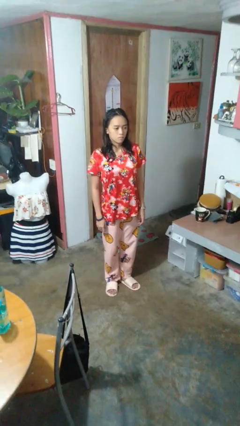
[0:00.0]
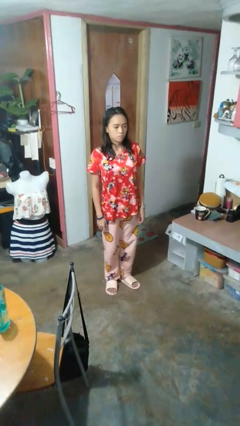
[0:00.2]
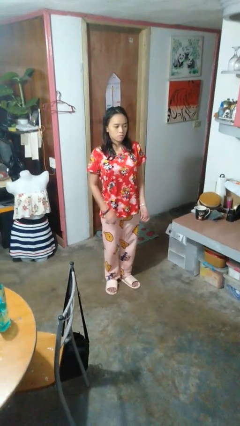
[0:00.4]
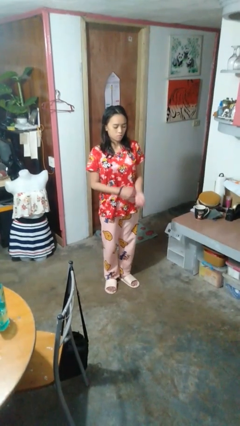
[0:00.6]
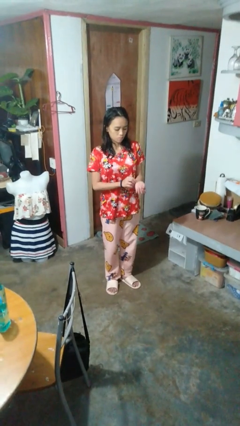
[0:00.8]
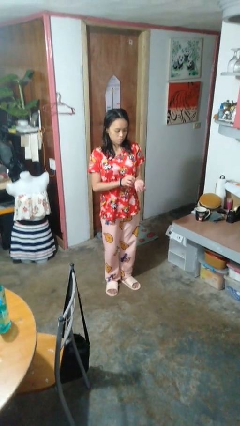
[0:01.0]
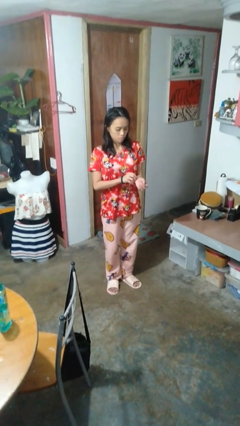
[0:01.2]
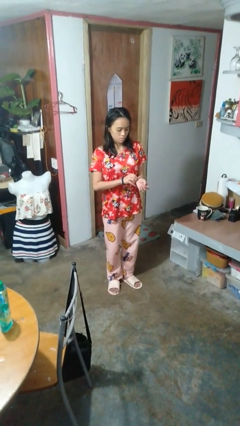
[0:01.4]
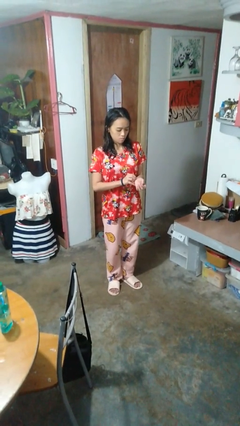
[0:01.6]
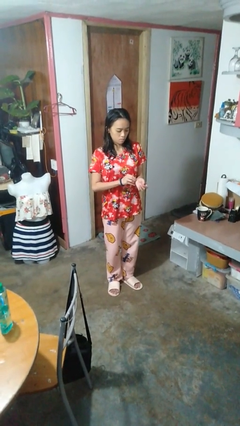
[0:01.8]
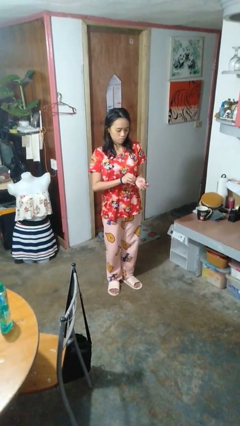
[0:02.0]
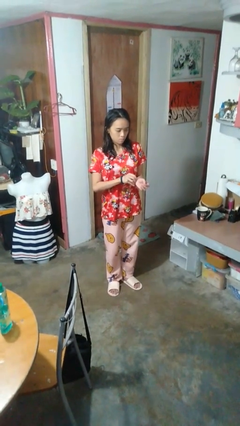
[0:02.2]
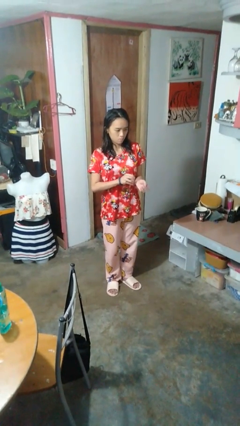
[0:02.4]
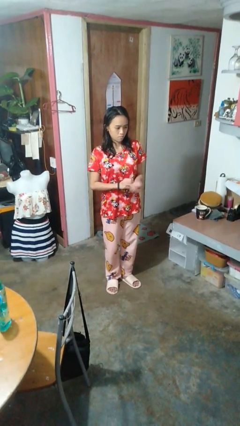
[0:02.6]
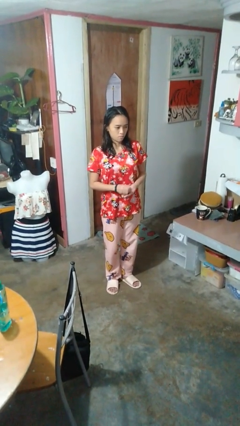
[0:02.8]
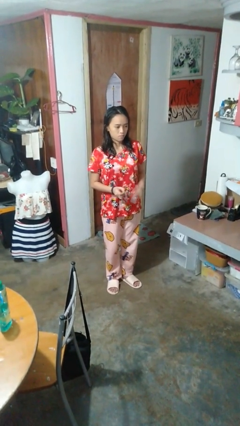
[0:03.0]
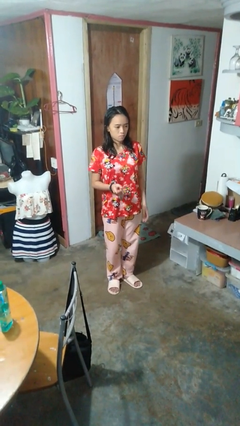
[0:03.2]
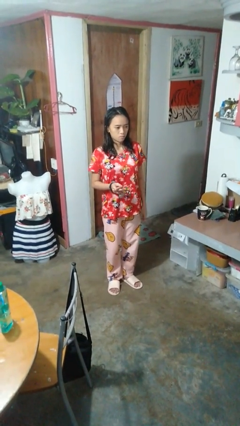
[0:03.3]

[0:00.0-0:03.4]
person takes off wristwatch

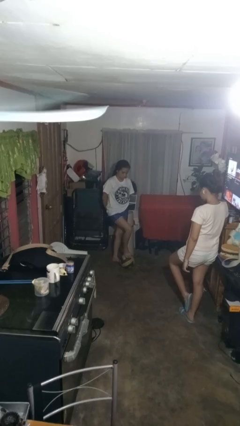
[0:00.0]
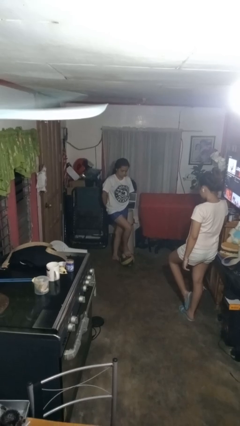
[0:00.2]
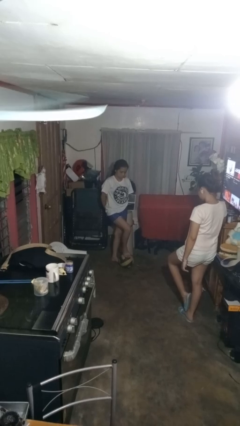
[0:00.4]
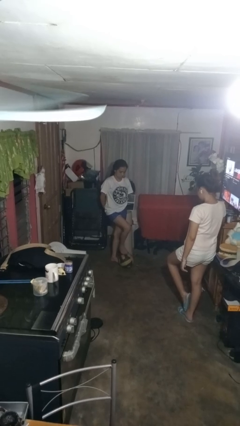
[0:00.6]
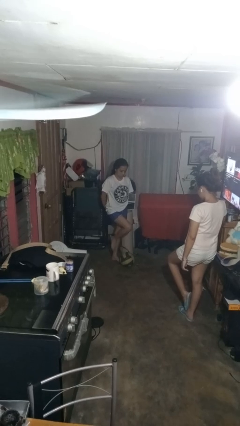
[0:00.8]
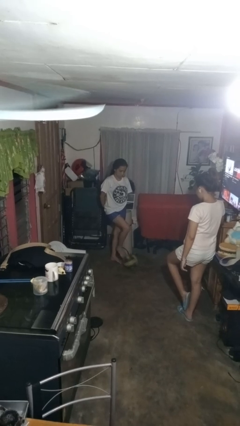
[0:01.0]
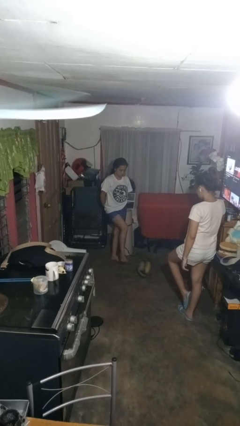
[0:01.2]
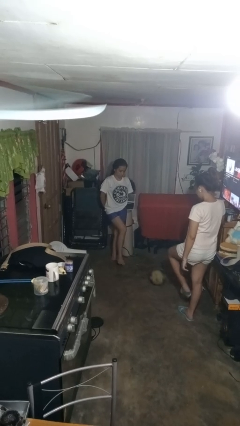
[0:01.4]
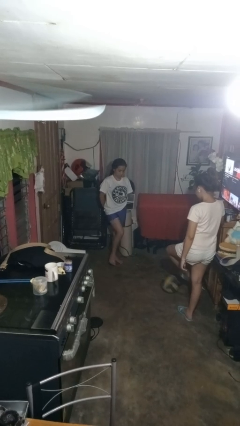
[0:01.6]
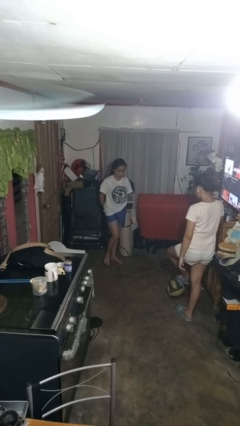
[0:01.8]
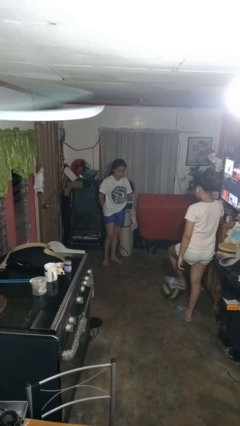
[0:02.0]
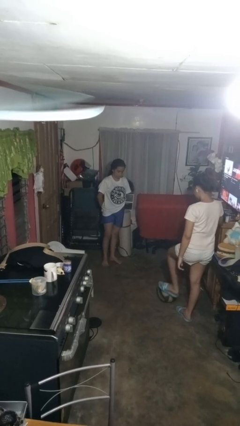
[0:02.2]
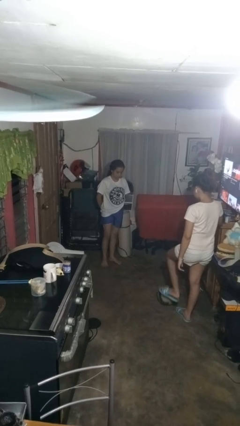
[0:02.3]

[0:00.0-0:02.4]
person kicks object to person

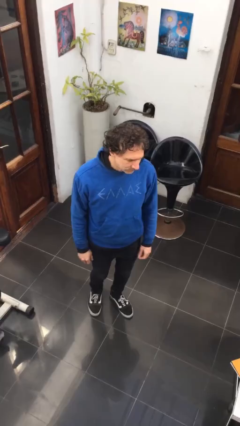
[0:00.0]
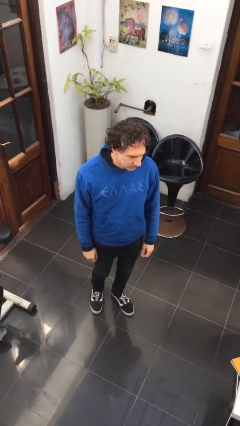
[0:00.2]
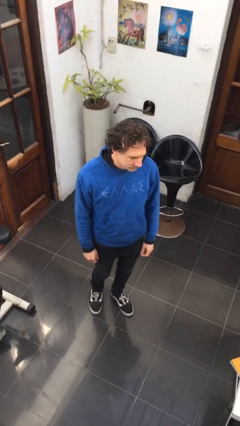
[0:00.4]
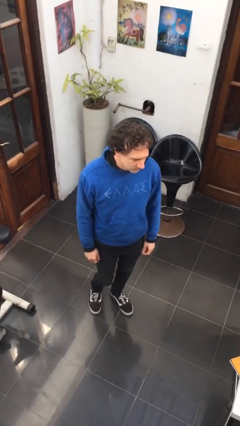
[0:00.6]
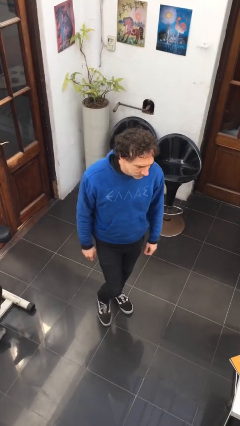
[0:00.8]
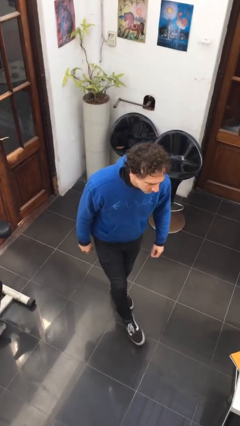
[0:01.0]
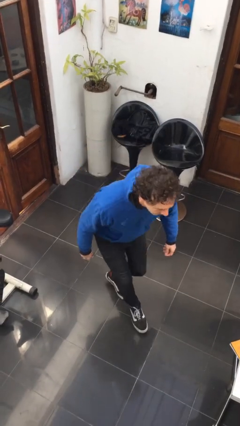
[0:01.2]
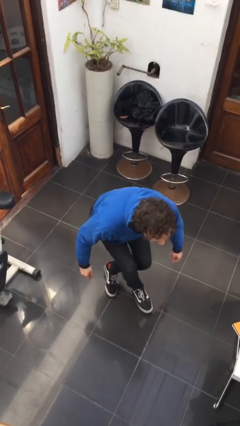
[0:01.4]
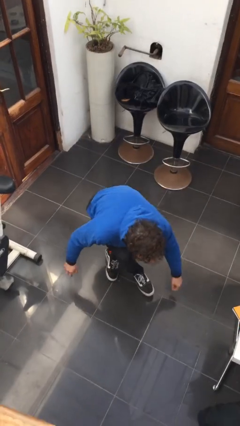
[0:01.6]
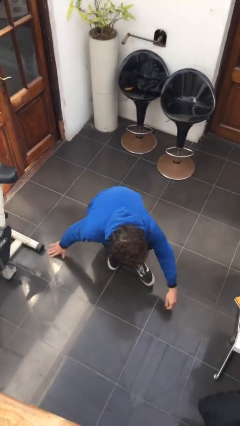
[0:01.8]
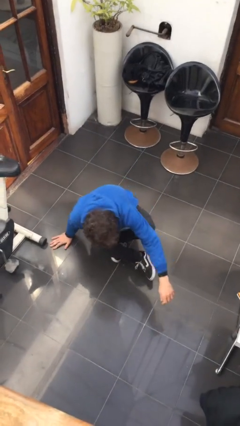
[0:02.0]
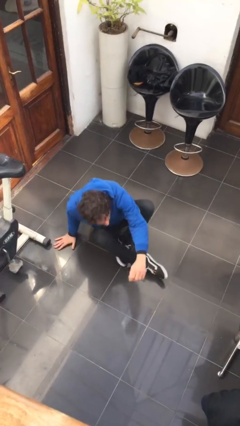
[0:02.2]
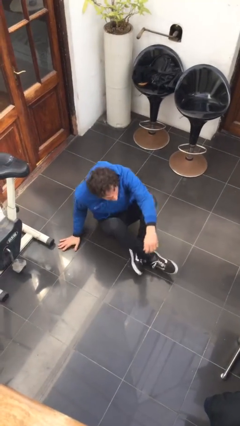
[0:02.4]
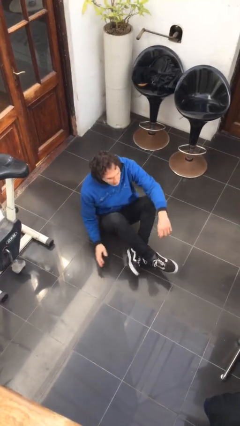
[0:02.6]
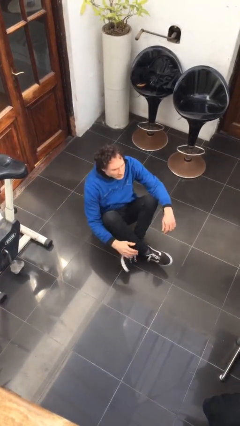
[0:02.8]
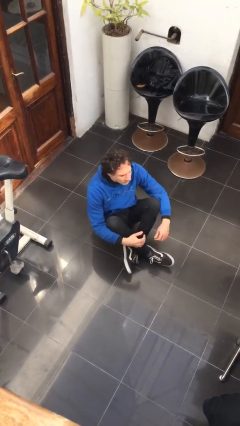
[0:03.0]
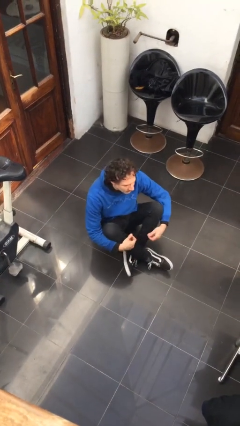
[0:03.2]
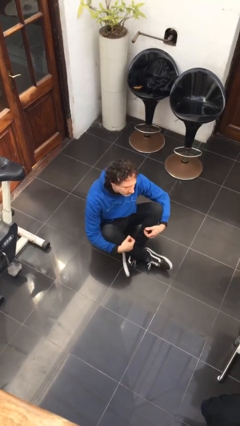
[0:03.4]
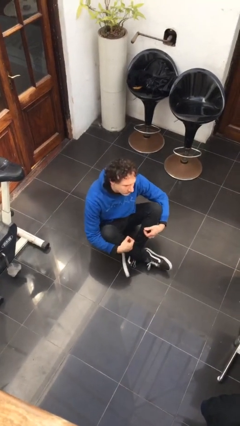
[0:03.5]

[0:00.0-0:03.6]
person sits crisscross

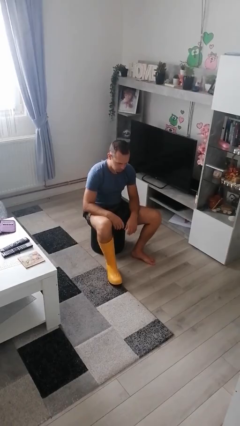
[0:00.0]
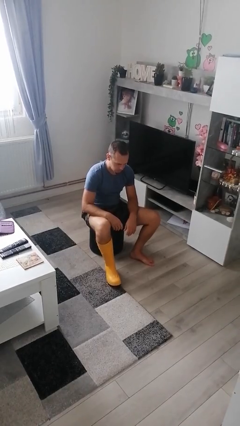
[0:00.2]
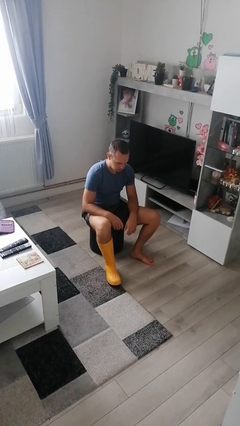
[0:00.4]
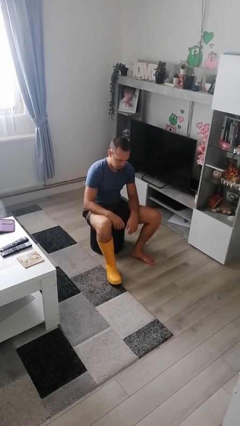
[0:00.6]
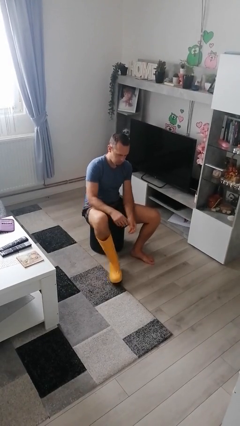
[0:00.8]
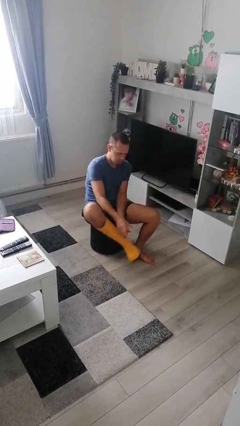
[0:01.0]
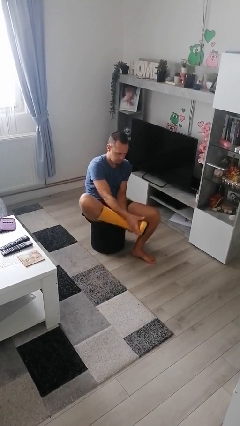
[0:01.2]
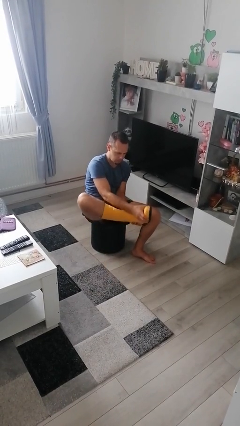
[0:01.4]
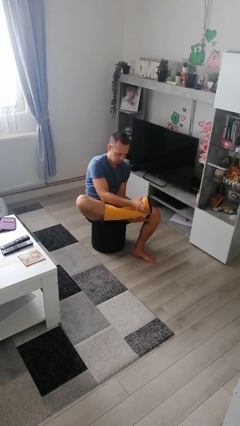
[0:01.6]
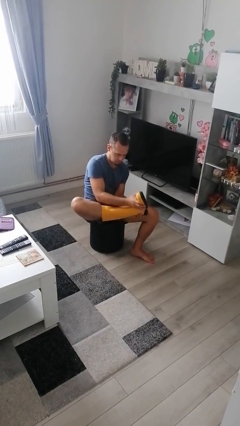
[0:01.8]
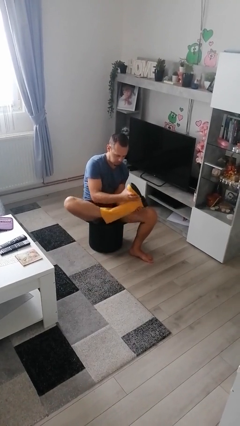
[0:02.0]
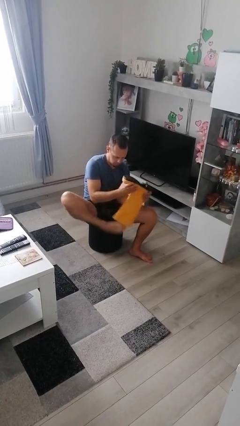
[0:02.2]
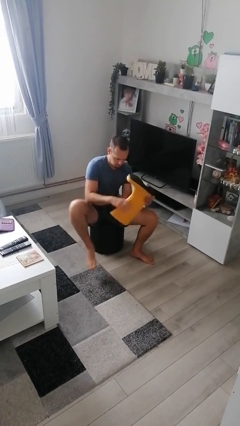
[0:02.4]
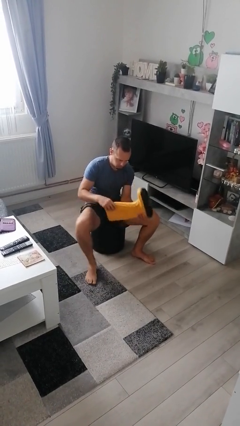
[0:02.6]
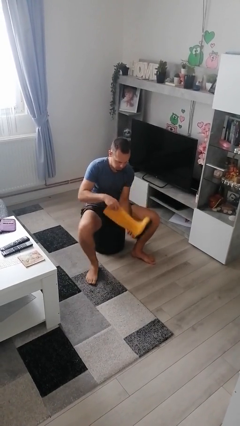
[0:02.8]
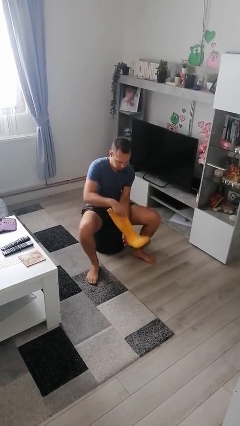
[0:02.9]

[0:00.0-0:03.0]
person takes off boots

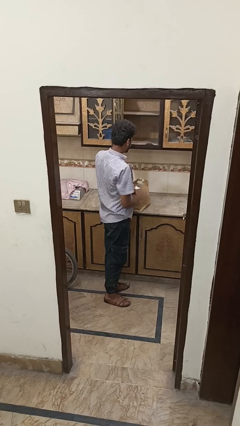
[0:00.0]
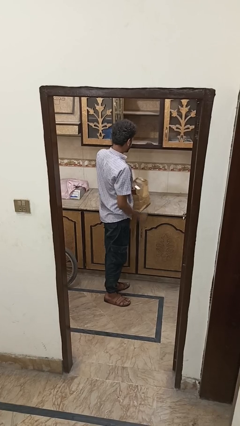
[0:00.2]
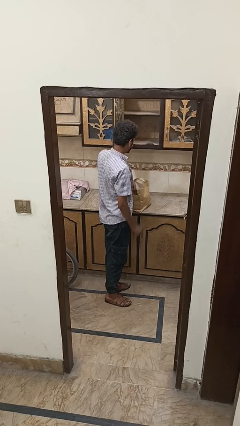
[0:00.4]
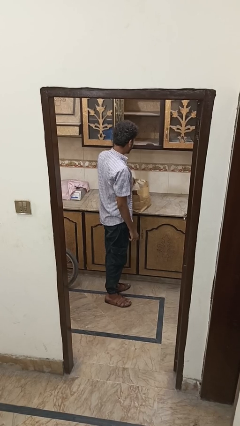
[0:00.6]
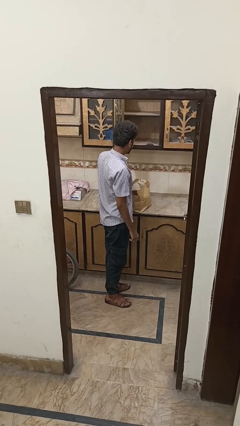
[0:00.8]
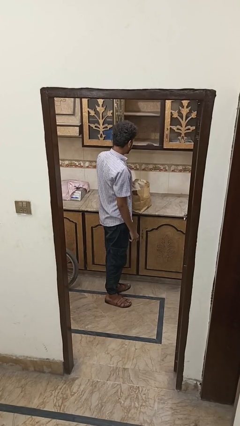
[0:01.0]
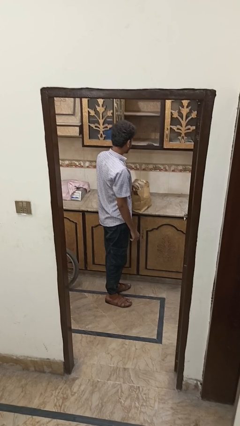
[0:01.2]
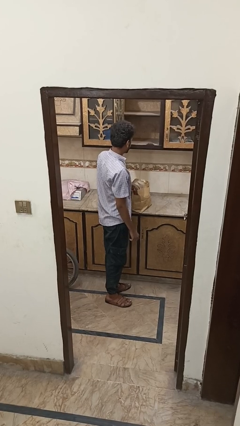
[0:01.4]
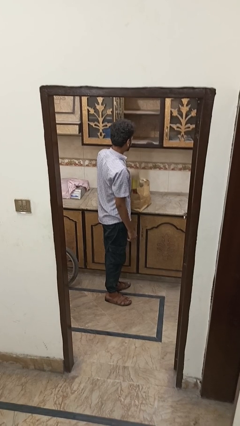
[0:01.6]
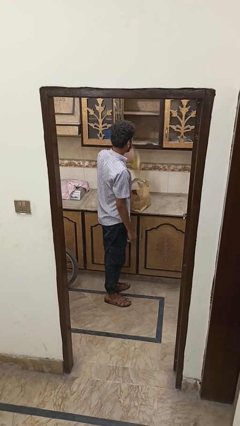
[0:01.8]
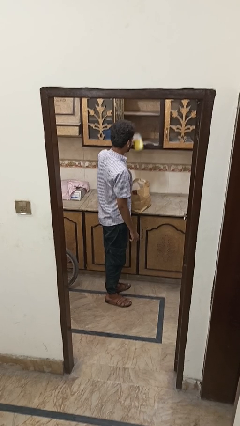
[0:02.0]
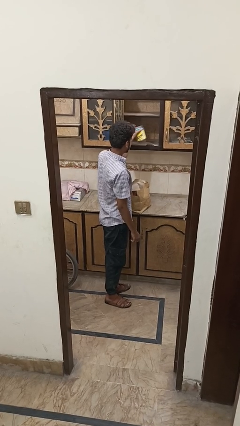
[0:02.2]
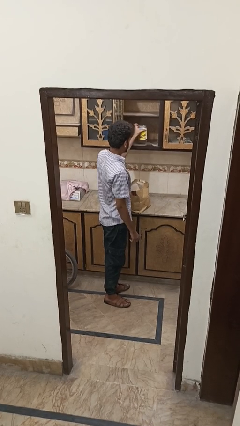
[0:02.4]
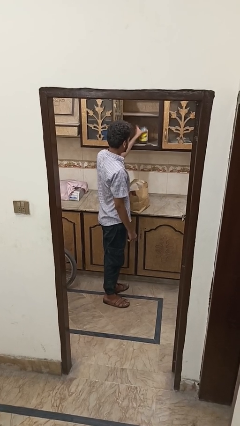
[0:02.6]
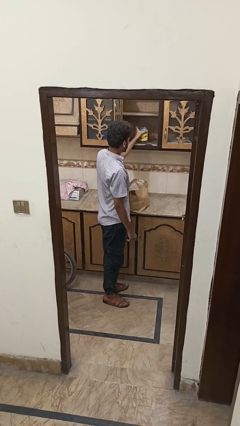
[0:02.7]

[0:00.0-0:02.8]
person covers with bedsheets

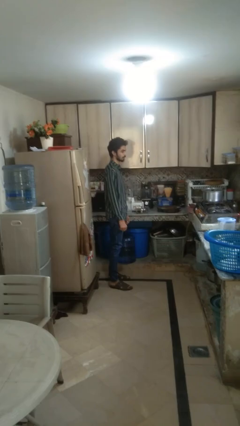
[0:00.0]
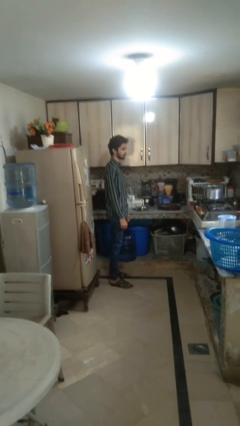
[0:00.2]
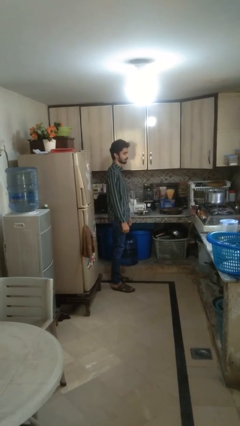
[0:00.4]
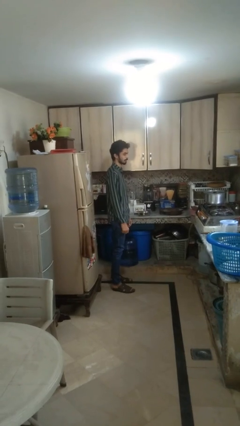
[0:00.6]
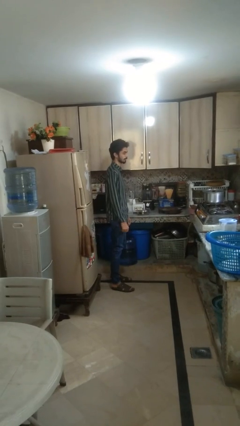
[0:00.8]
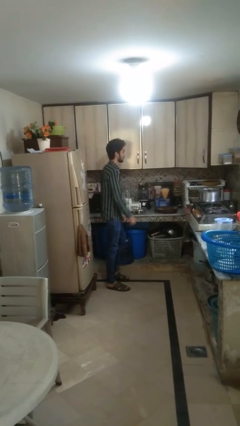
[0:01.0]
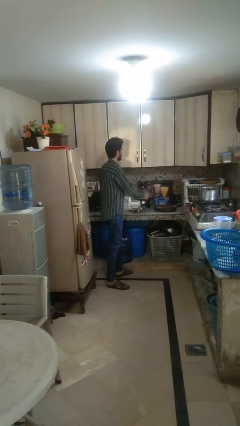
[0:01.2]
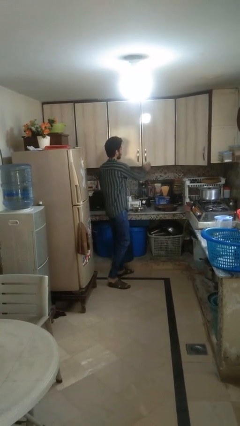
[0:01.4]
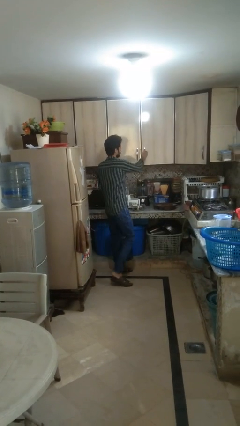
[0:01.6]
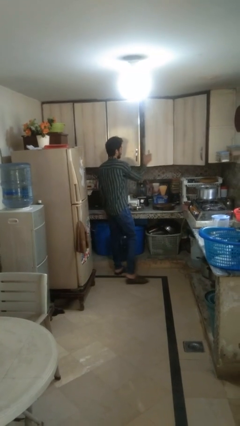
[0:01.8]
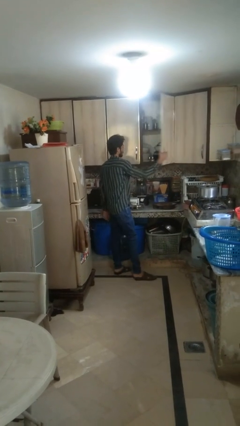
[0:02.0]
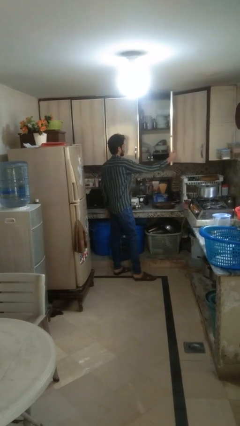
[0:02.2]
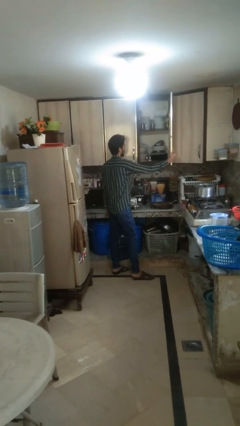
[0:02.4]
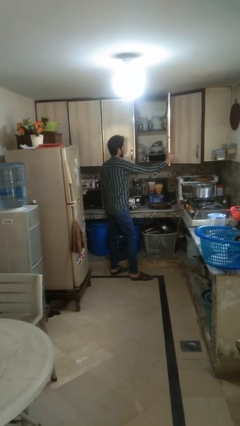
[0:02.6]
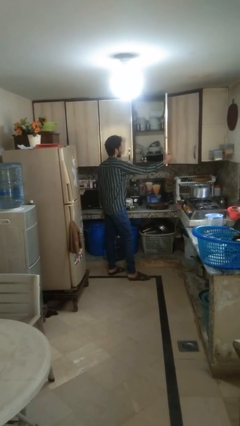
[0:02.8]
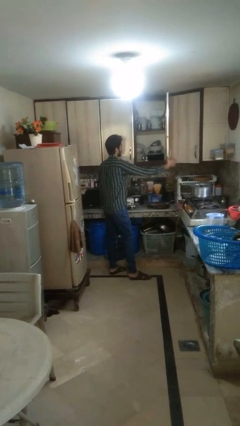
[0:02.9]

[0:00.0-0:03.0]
person opens cabinet
